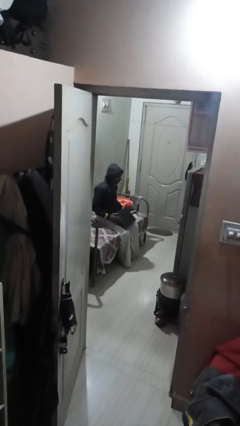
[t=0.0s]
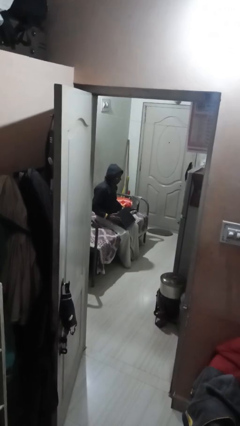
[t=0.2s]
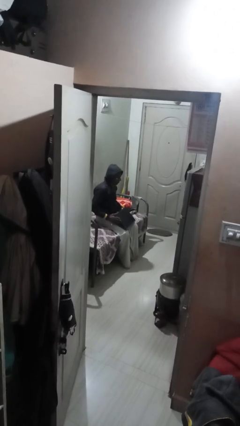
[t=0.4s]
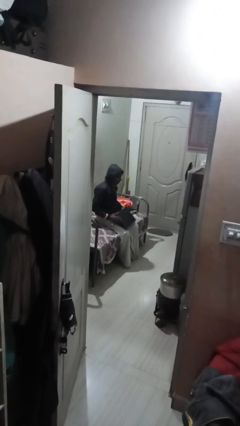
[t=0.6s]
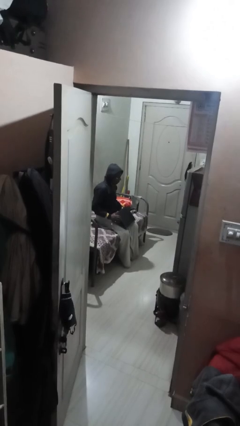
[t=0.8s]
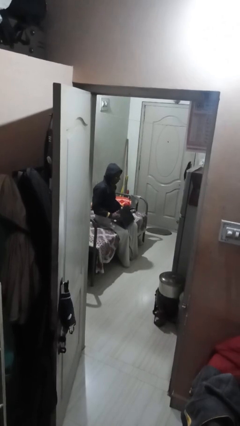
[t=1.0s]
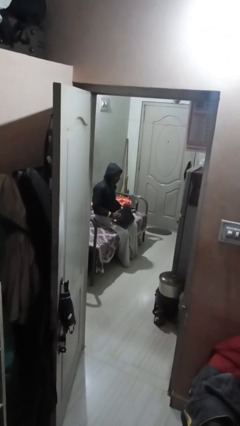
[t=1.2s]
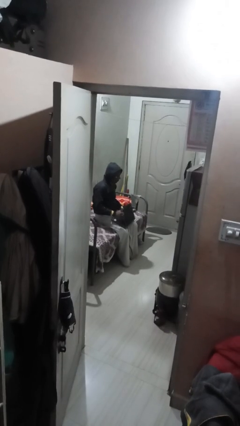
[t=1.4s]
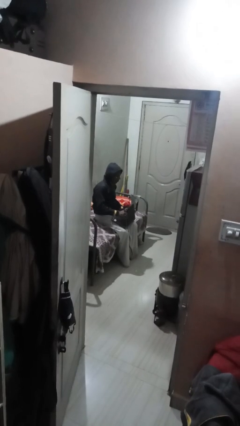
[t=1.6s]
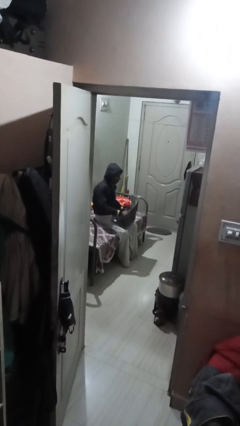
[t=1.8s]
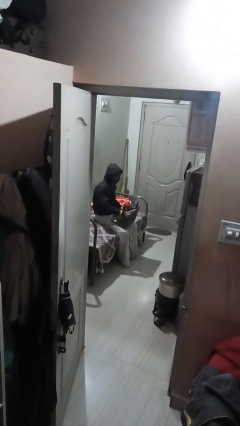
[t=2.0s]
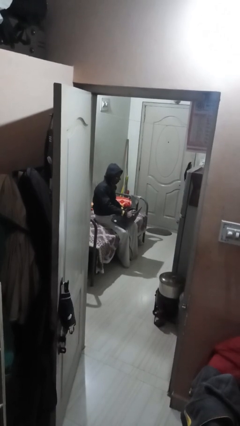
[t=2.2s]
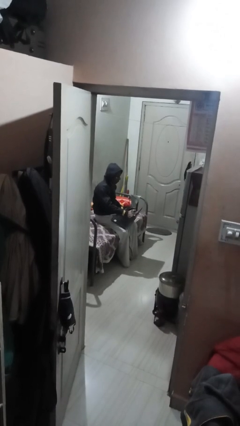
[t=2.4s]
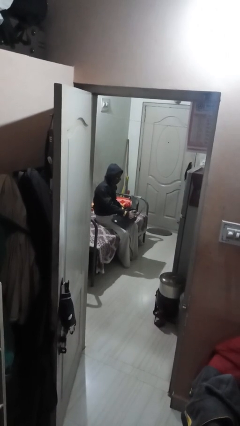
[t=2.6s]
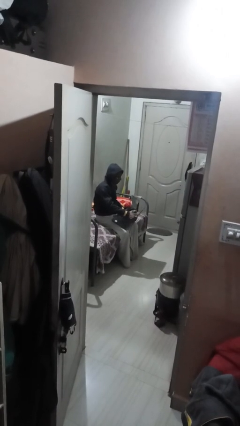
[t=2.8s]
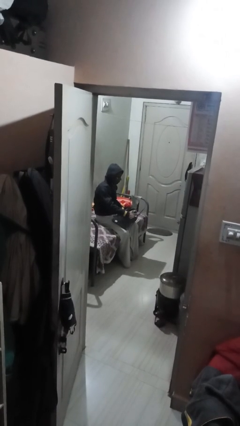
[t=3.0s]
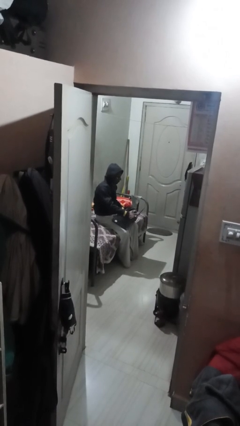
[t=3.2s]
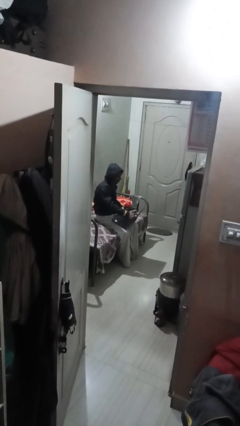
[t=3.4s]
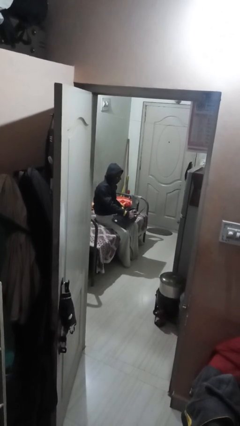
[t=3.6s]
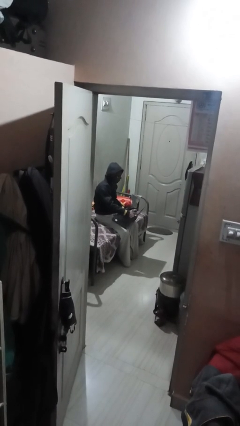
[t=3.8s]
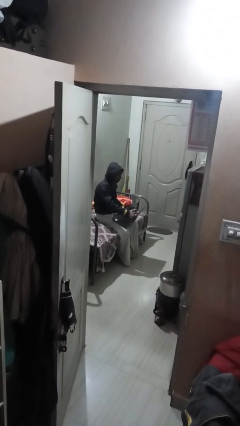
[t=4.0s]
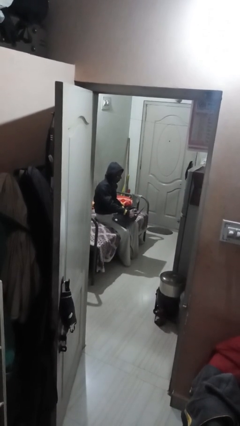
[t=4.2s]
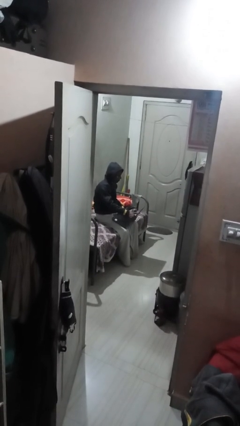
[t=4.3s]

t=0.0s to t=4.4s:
person interacts with laptop

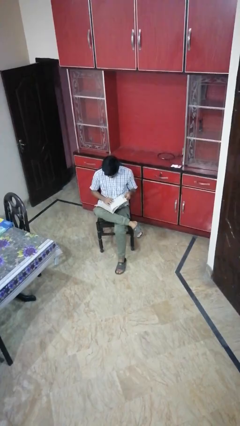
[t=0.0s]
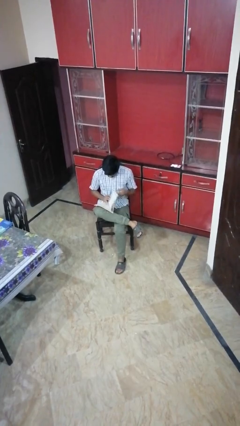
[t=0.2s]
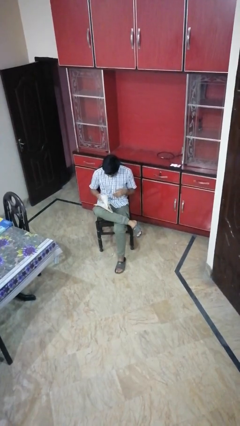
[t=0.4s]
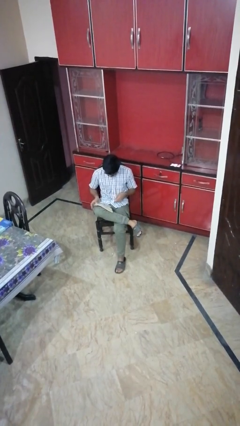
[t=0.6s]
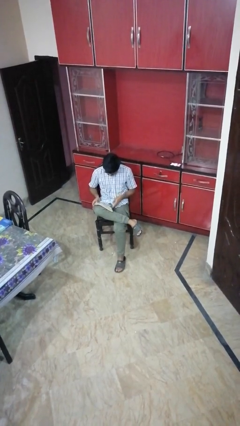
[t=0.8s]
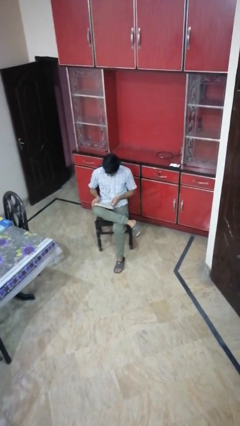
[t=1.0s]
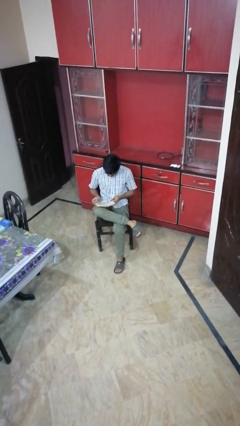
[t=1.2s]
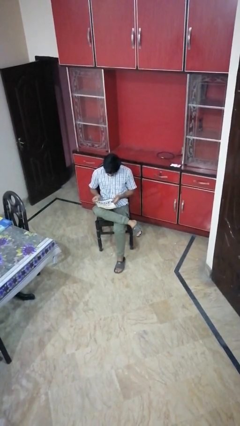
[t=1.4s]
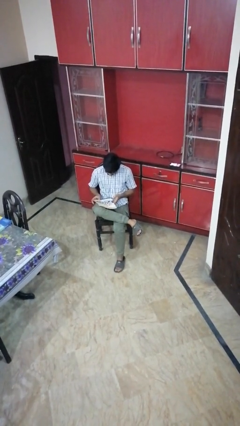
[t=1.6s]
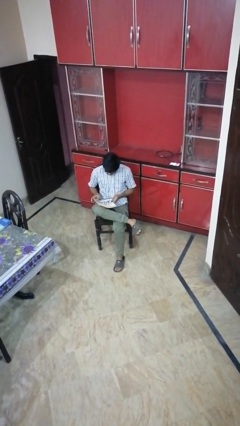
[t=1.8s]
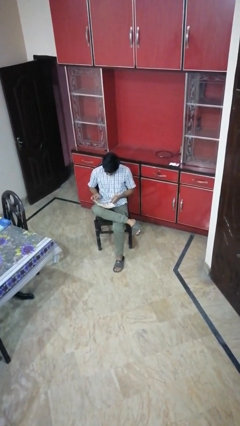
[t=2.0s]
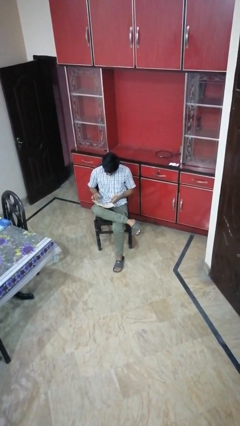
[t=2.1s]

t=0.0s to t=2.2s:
person exercises with situp

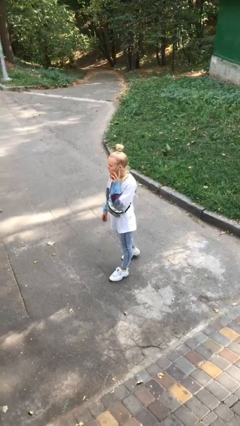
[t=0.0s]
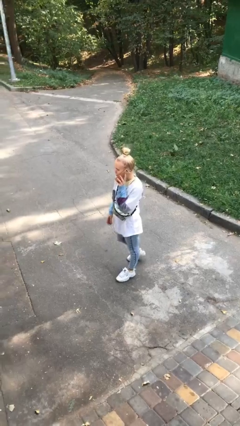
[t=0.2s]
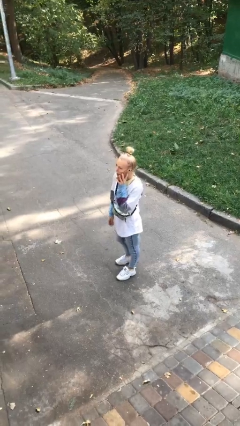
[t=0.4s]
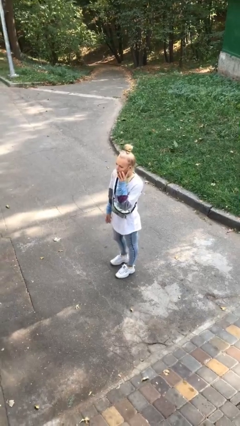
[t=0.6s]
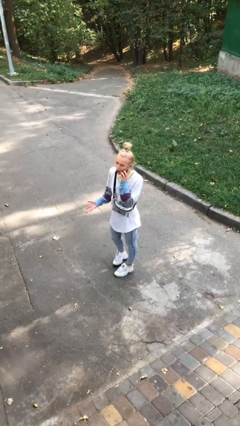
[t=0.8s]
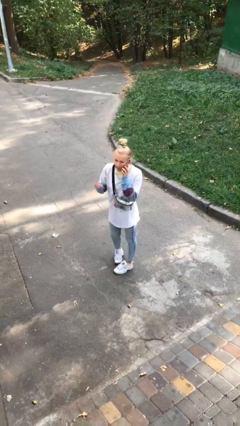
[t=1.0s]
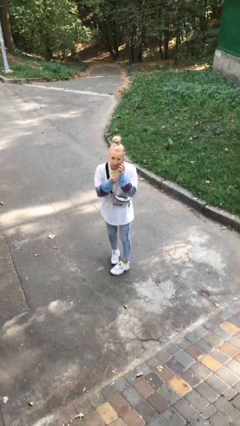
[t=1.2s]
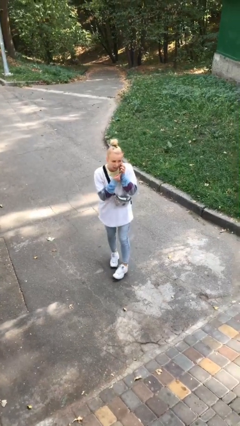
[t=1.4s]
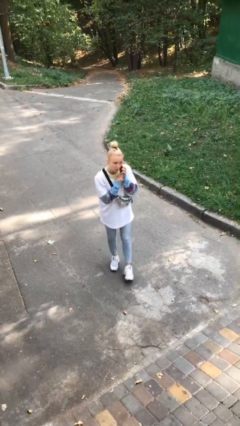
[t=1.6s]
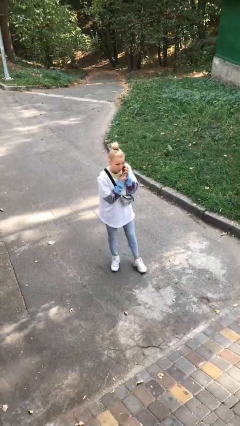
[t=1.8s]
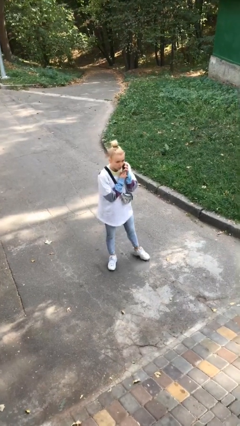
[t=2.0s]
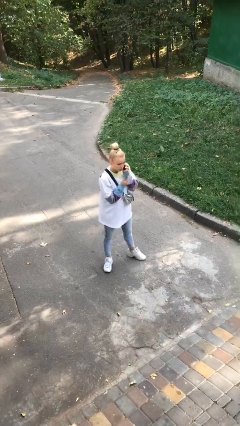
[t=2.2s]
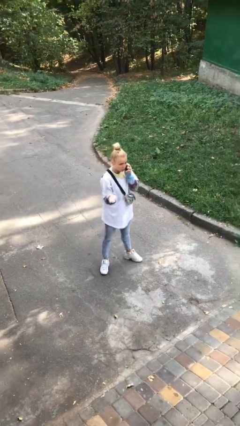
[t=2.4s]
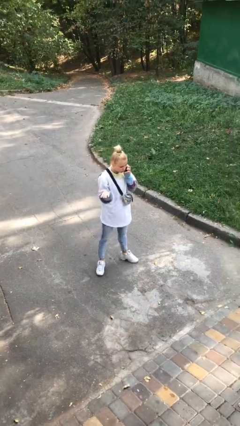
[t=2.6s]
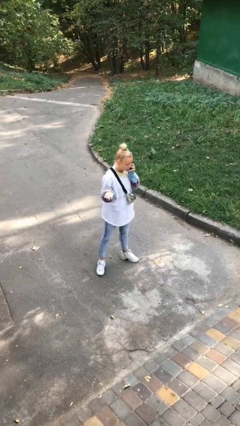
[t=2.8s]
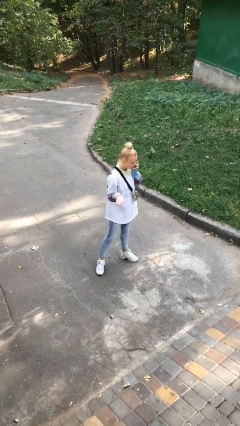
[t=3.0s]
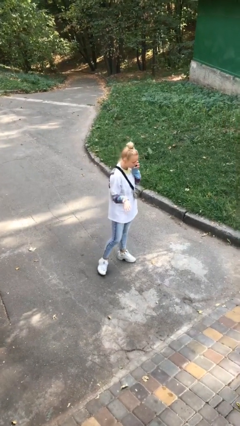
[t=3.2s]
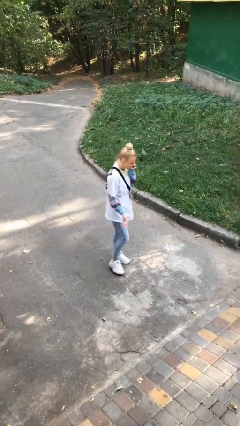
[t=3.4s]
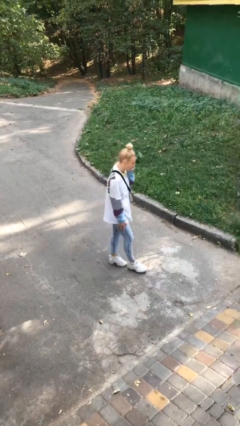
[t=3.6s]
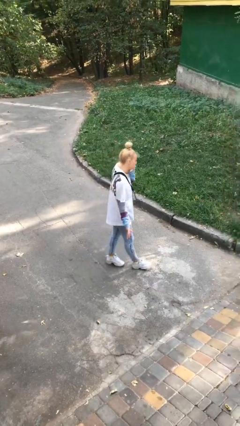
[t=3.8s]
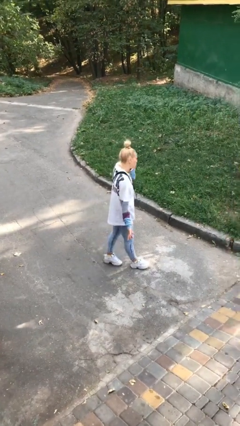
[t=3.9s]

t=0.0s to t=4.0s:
person talks on phone

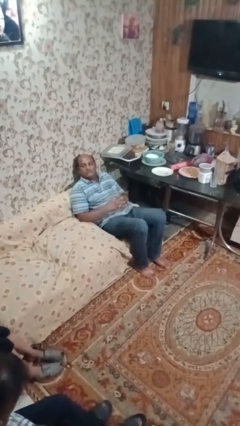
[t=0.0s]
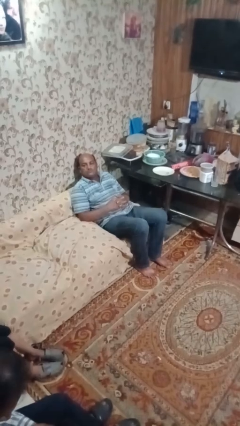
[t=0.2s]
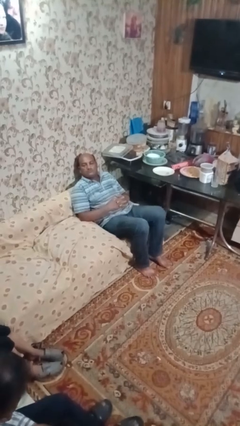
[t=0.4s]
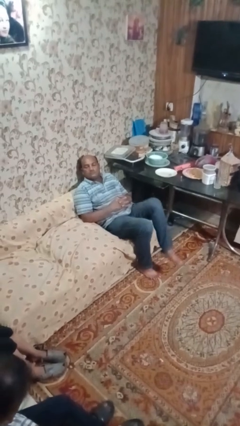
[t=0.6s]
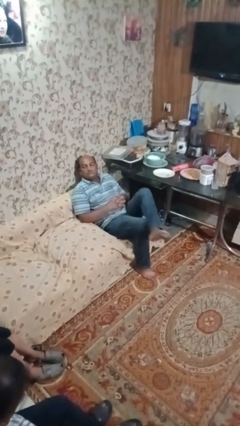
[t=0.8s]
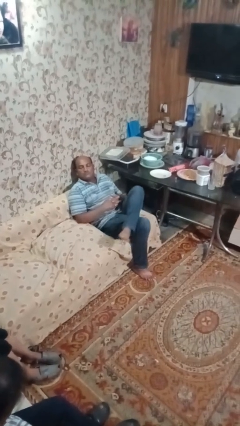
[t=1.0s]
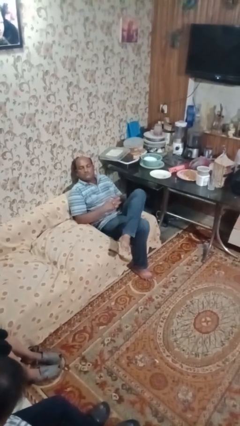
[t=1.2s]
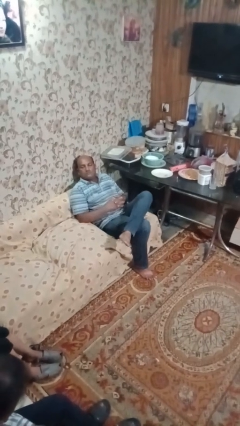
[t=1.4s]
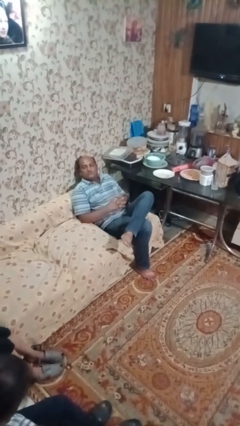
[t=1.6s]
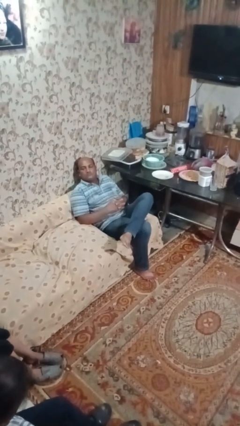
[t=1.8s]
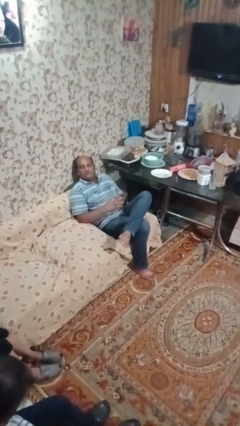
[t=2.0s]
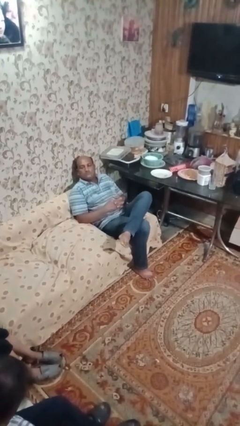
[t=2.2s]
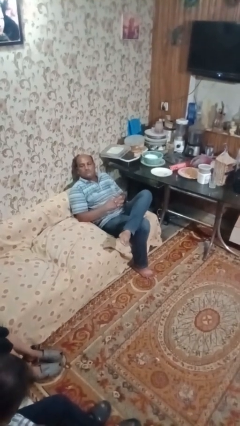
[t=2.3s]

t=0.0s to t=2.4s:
person crosses legs

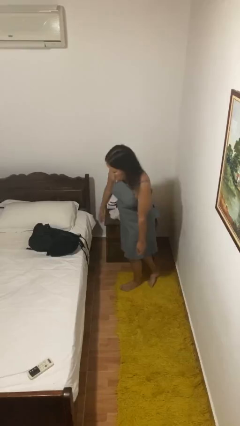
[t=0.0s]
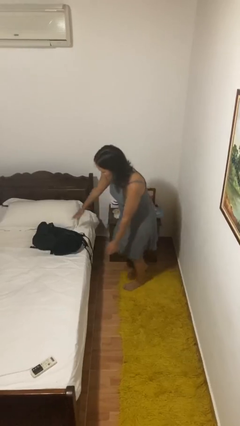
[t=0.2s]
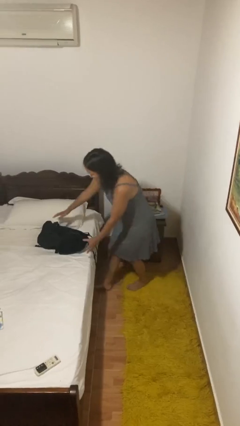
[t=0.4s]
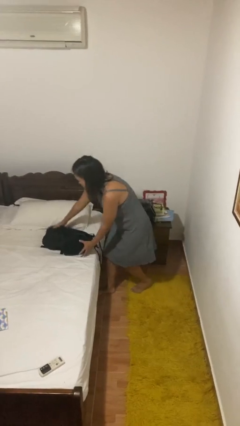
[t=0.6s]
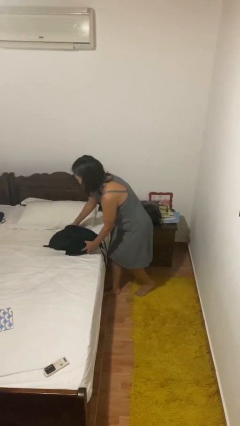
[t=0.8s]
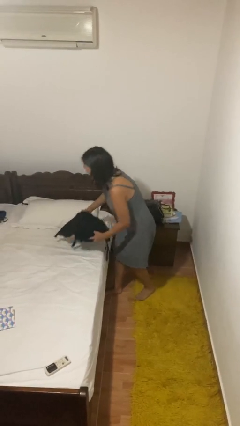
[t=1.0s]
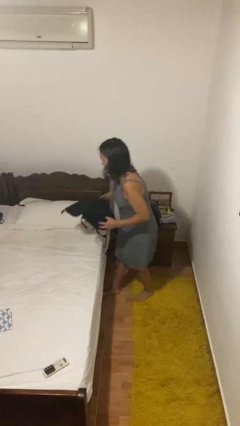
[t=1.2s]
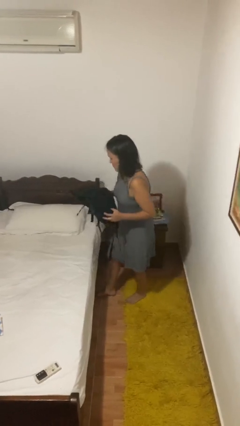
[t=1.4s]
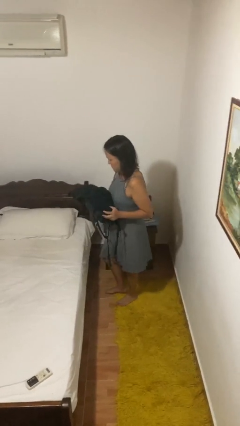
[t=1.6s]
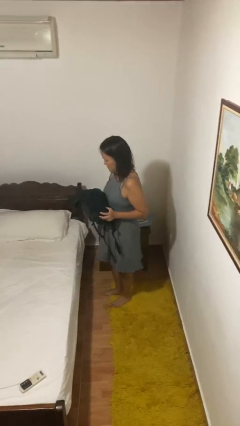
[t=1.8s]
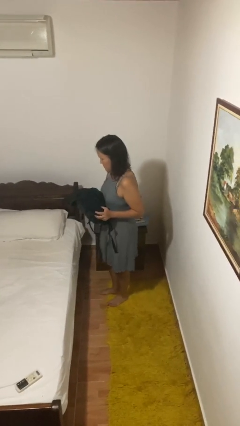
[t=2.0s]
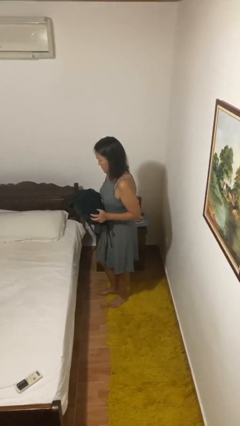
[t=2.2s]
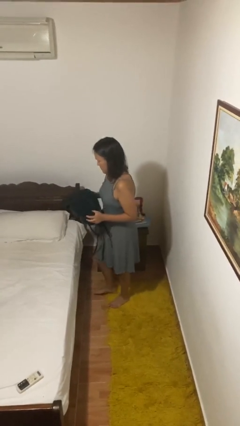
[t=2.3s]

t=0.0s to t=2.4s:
person picks up object from bed

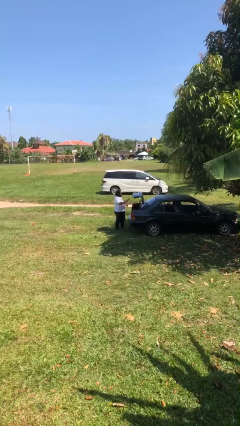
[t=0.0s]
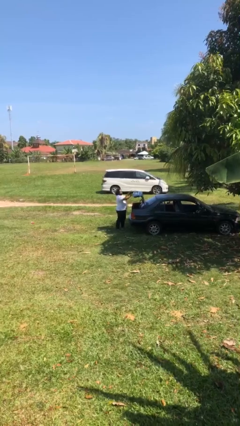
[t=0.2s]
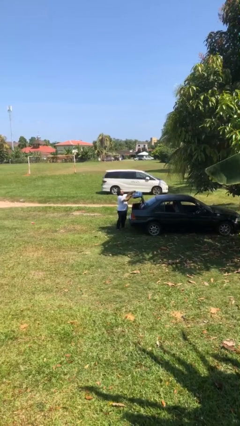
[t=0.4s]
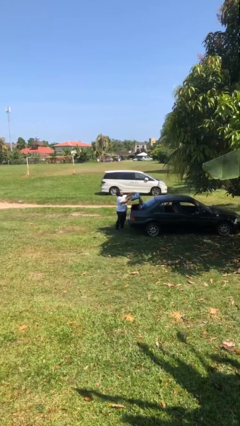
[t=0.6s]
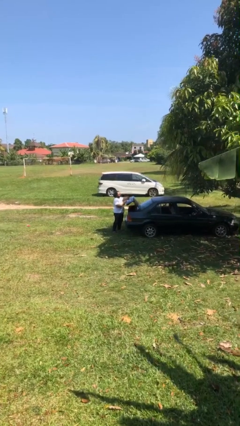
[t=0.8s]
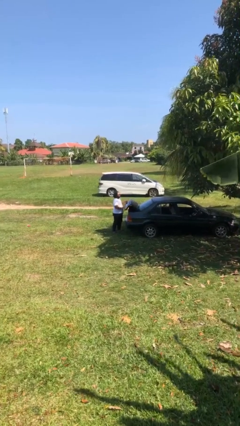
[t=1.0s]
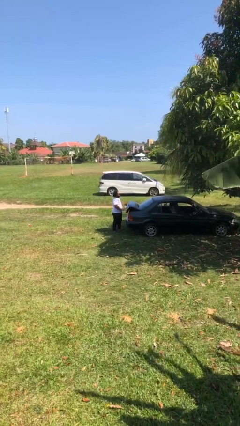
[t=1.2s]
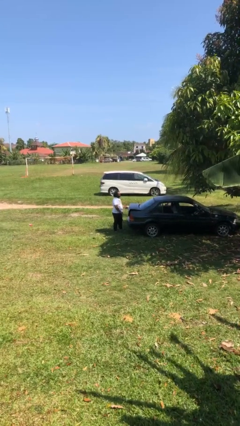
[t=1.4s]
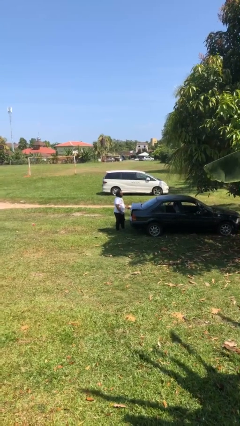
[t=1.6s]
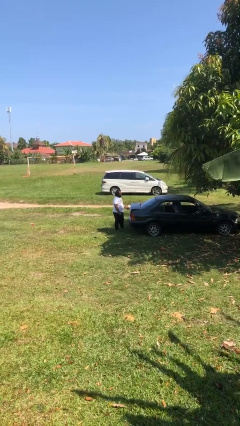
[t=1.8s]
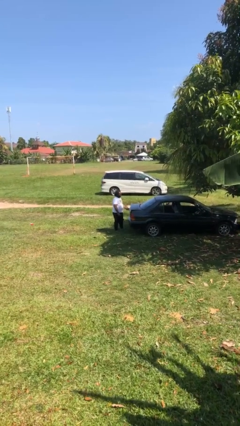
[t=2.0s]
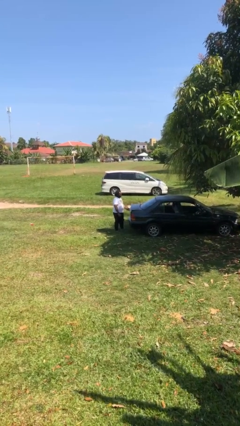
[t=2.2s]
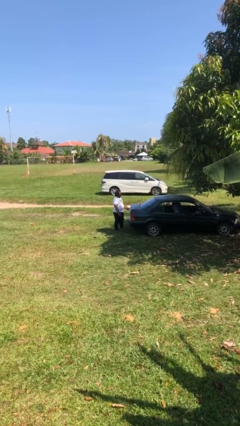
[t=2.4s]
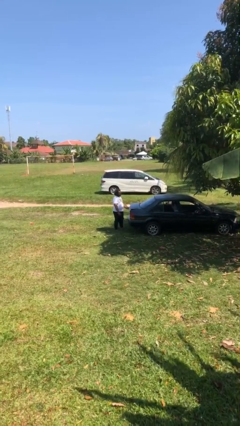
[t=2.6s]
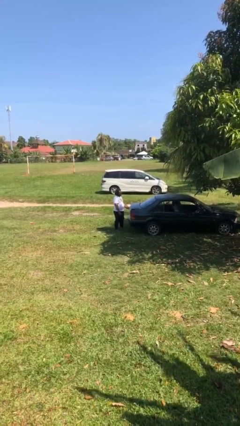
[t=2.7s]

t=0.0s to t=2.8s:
person closes car trunk
